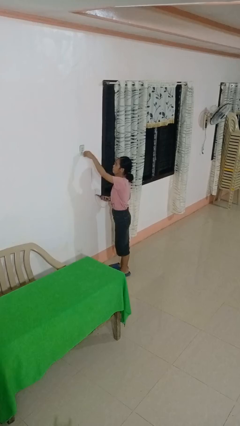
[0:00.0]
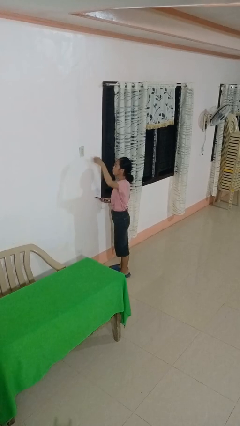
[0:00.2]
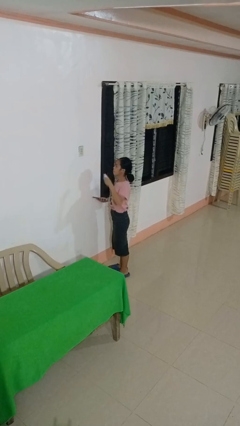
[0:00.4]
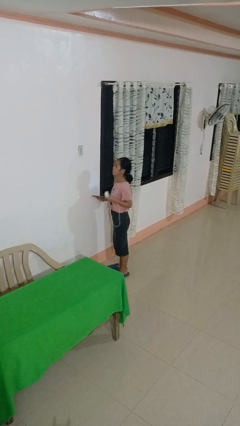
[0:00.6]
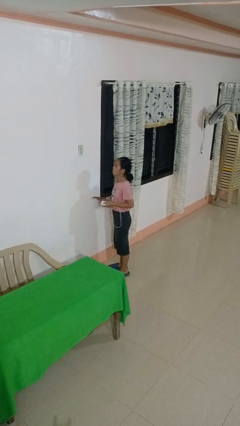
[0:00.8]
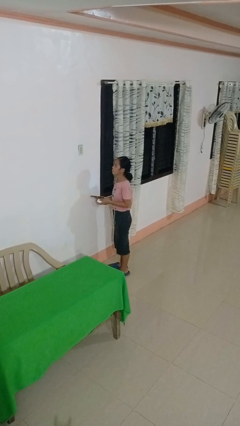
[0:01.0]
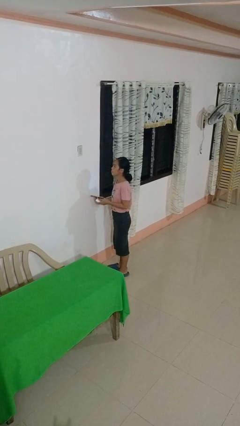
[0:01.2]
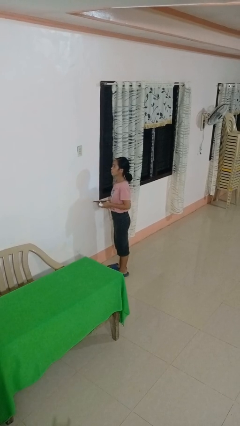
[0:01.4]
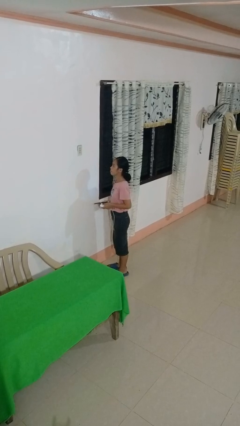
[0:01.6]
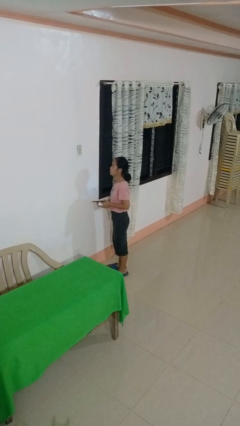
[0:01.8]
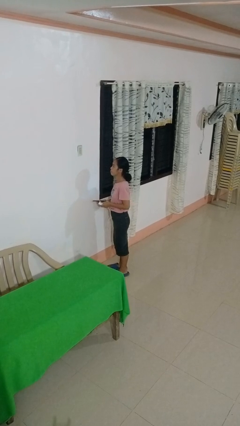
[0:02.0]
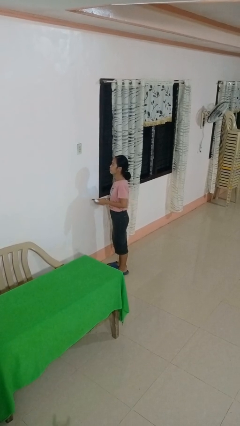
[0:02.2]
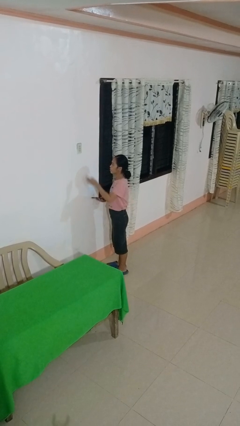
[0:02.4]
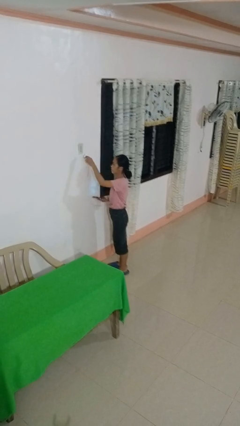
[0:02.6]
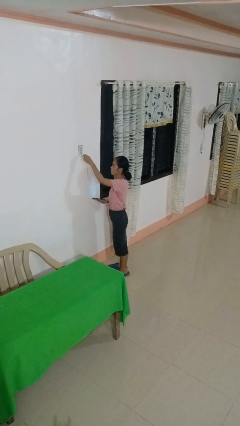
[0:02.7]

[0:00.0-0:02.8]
person unplugs from electrical socket

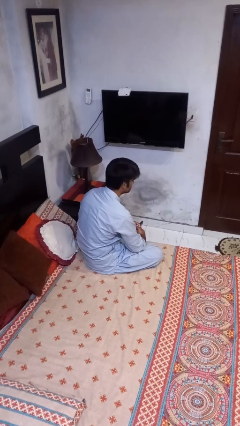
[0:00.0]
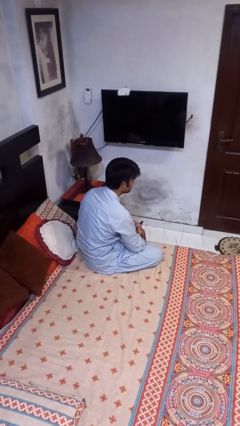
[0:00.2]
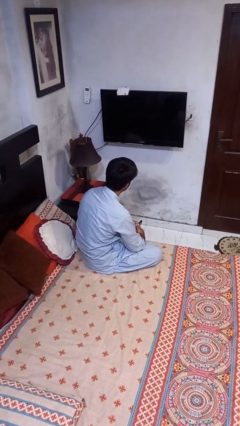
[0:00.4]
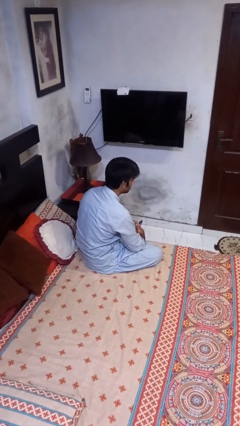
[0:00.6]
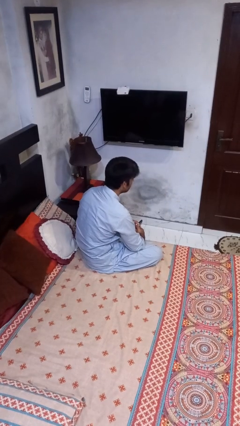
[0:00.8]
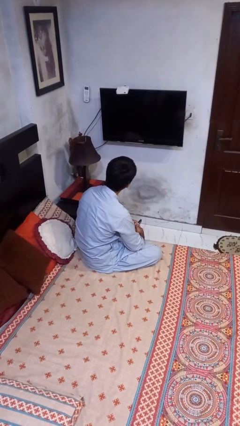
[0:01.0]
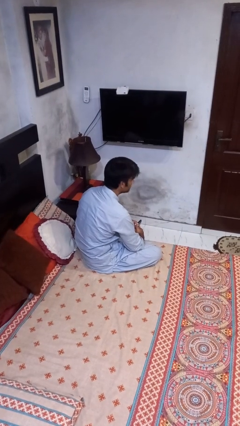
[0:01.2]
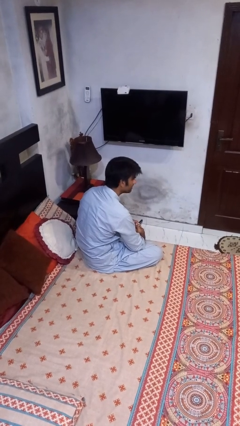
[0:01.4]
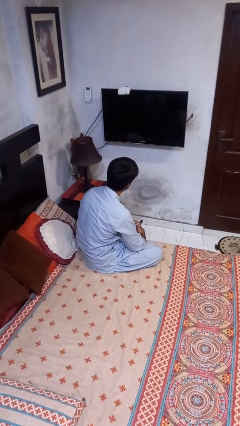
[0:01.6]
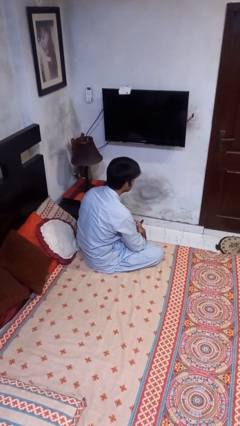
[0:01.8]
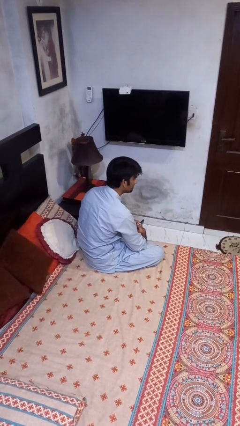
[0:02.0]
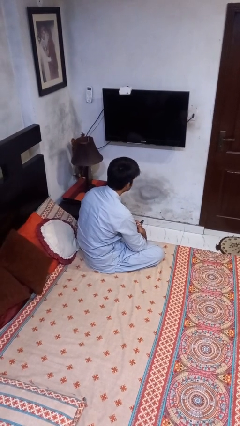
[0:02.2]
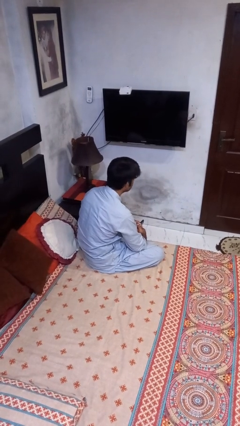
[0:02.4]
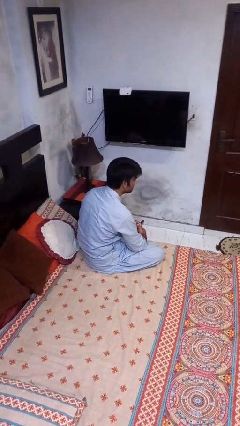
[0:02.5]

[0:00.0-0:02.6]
person shakes head

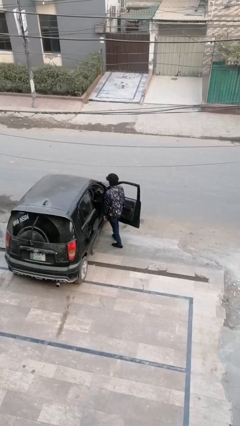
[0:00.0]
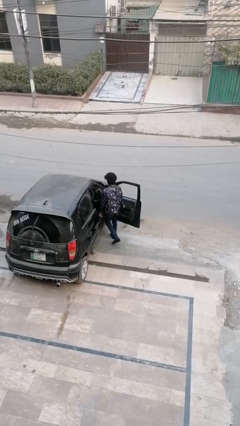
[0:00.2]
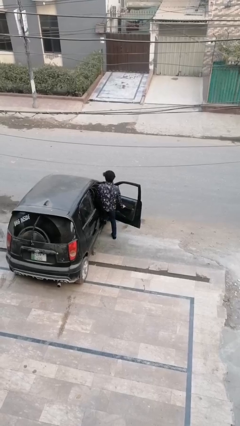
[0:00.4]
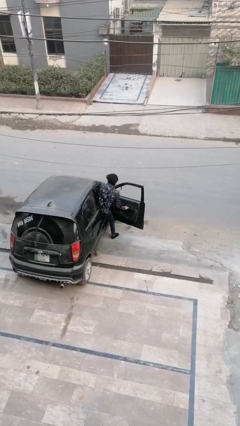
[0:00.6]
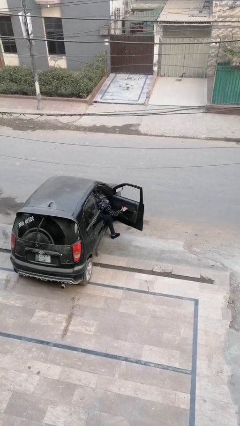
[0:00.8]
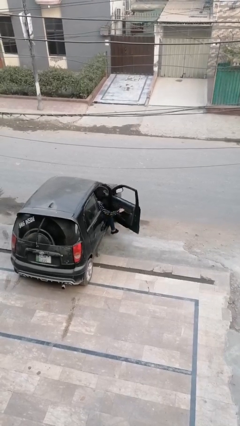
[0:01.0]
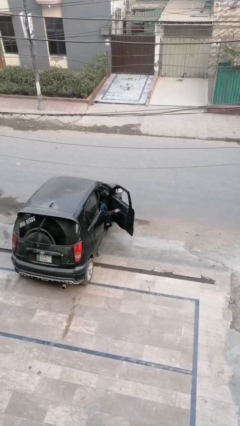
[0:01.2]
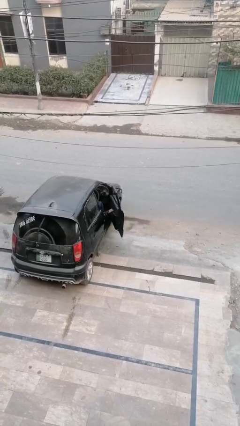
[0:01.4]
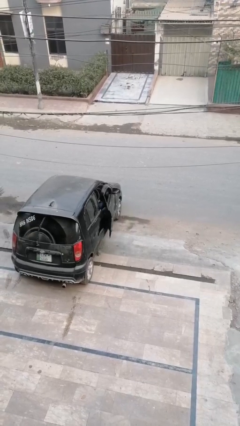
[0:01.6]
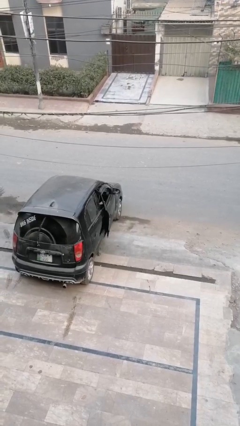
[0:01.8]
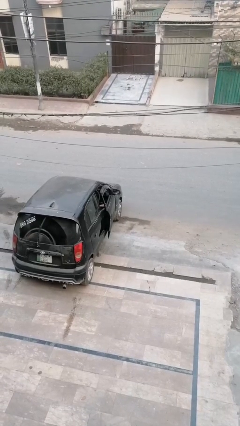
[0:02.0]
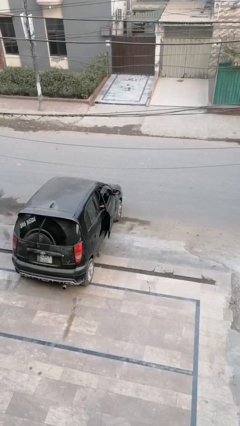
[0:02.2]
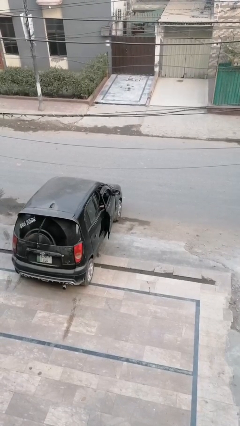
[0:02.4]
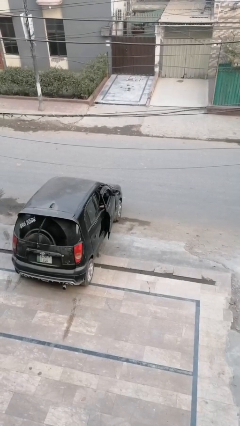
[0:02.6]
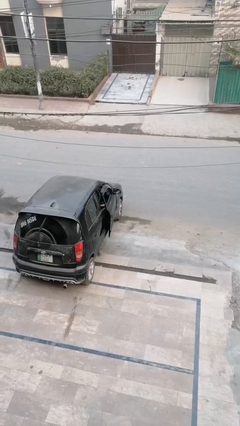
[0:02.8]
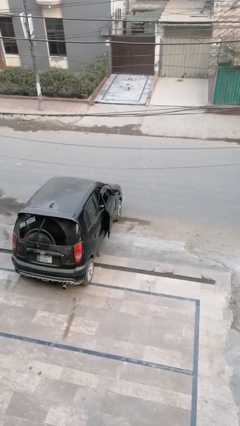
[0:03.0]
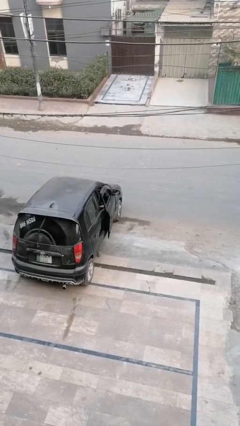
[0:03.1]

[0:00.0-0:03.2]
person enters car

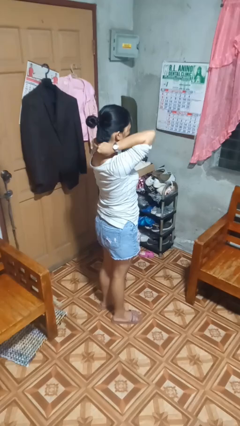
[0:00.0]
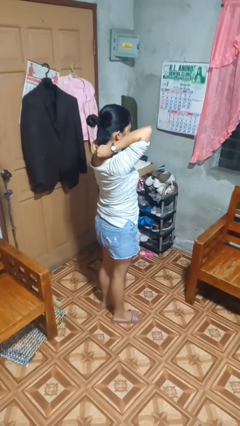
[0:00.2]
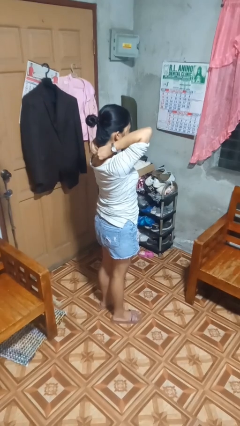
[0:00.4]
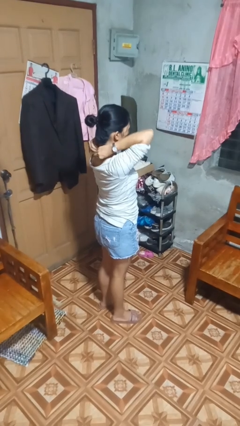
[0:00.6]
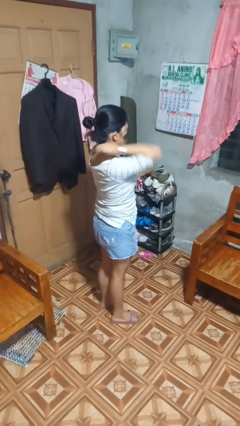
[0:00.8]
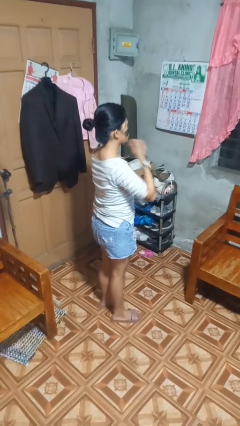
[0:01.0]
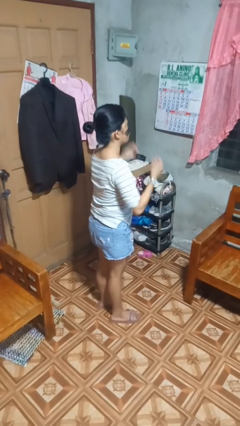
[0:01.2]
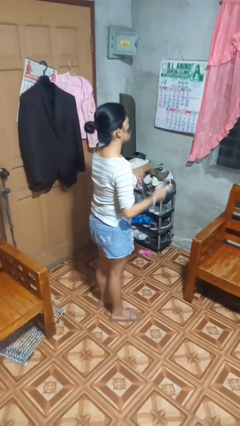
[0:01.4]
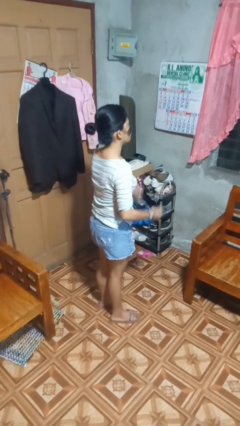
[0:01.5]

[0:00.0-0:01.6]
person takes off necklace

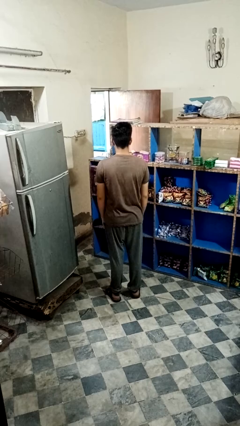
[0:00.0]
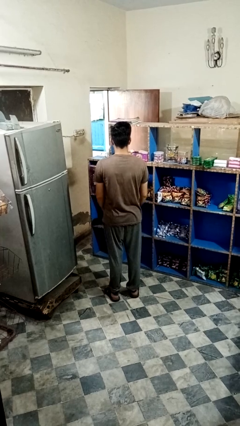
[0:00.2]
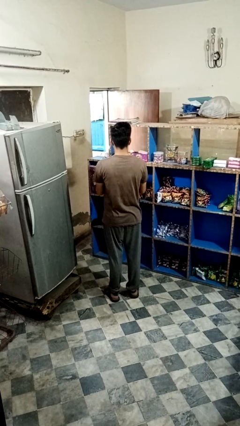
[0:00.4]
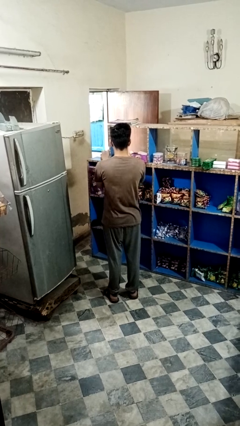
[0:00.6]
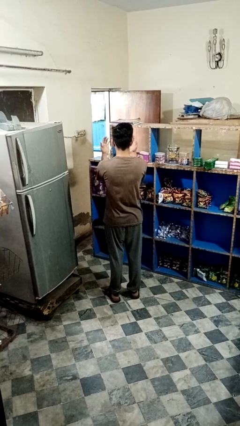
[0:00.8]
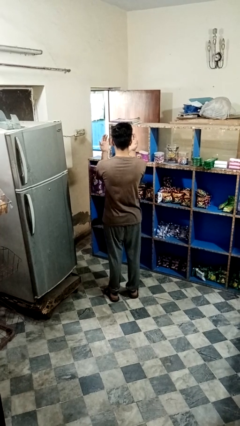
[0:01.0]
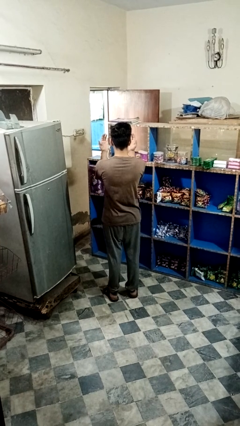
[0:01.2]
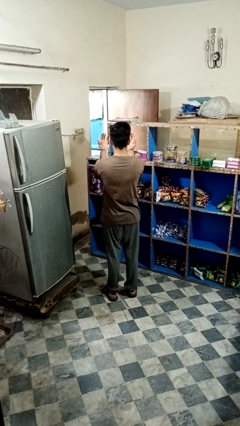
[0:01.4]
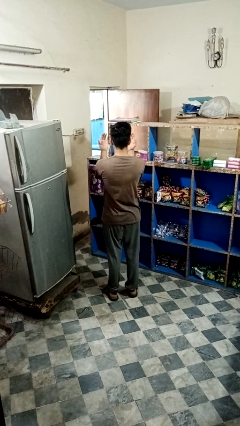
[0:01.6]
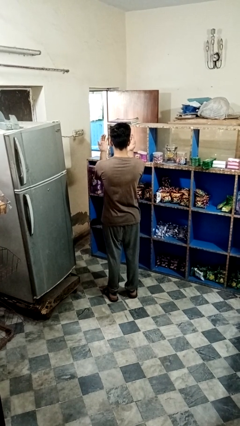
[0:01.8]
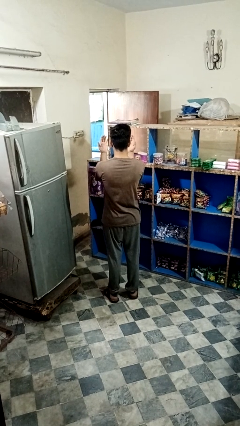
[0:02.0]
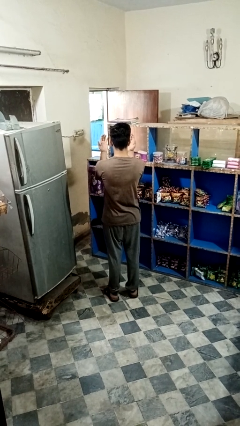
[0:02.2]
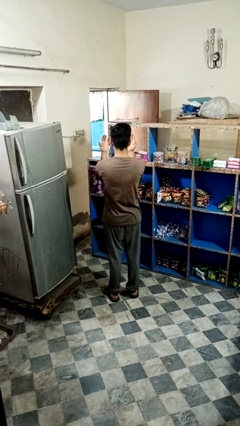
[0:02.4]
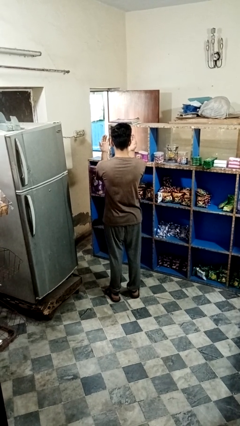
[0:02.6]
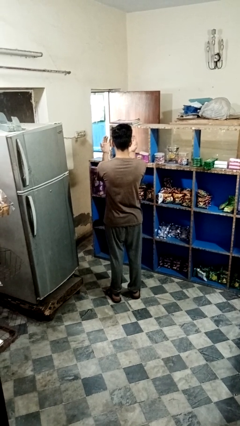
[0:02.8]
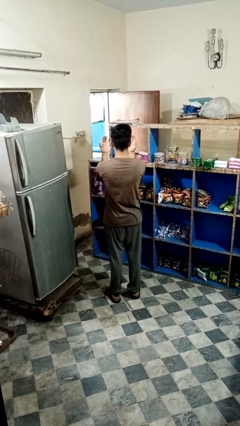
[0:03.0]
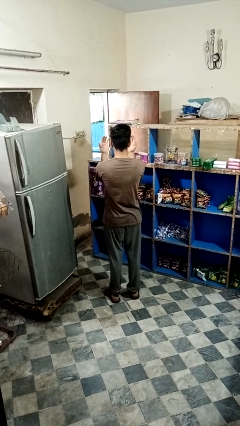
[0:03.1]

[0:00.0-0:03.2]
person prays

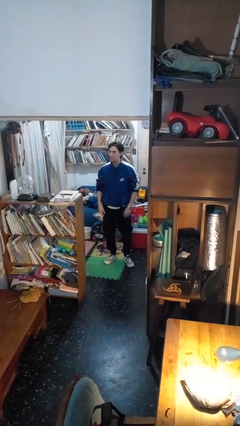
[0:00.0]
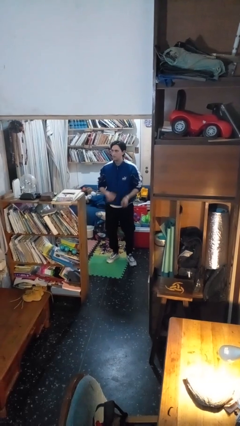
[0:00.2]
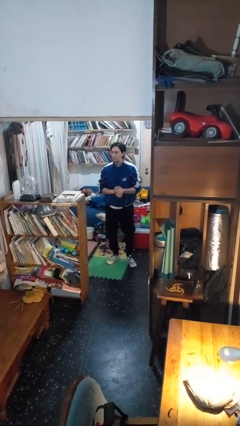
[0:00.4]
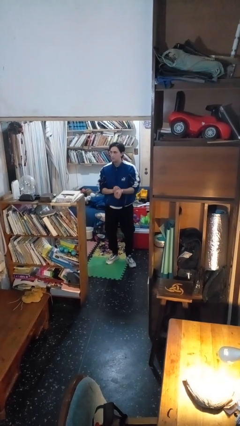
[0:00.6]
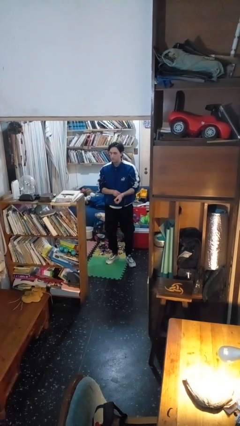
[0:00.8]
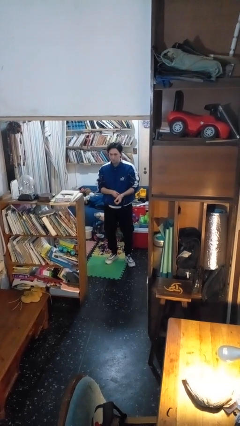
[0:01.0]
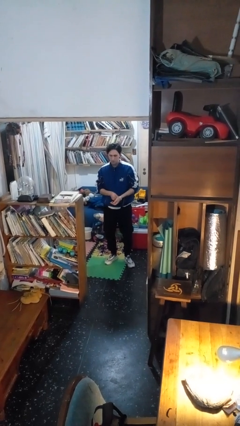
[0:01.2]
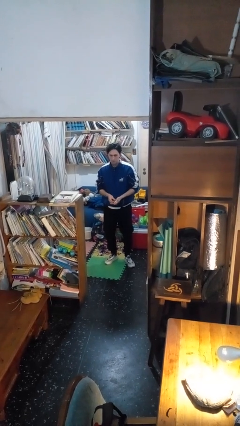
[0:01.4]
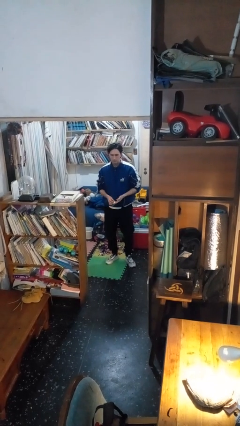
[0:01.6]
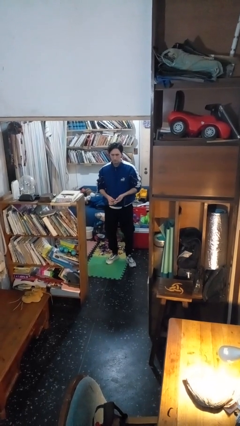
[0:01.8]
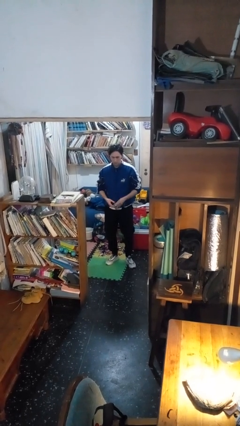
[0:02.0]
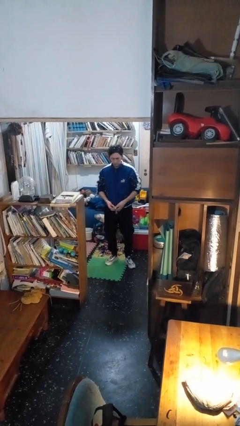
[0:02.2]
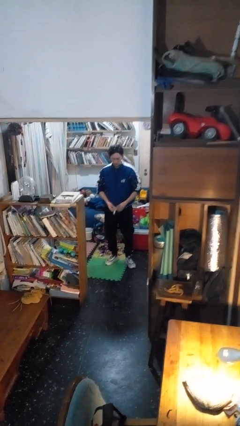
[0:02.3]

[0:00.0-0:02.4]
person takes off wristwatch

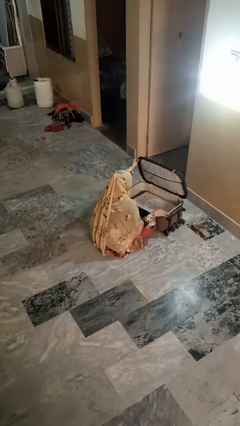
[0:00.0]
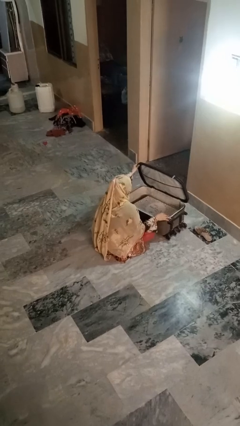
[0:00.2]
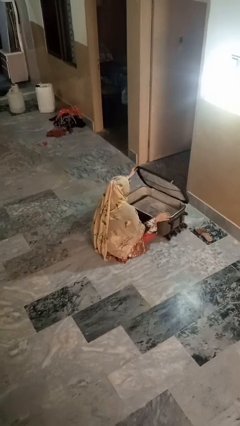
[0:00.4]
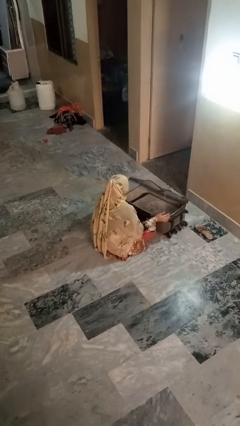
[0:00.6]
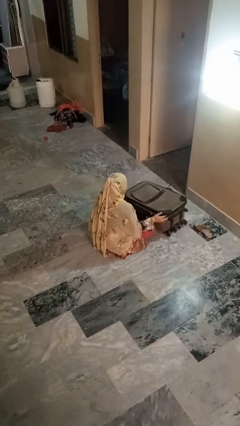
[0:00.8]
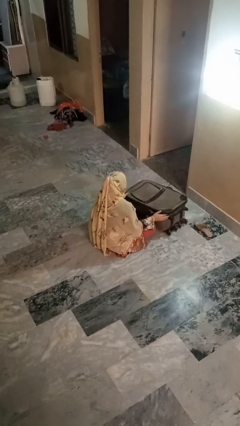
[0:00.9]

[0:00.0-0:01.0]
person closes suitcase

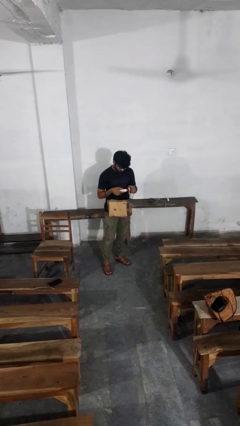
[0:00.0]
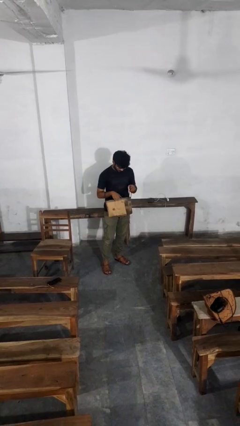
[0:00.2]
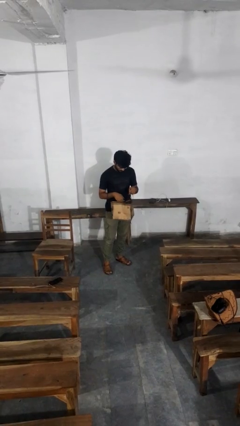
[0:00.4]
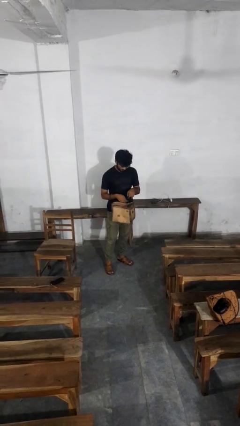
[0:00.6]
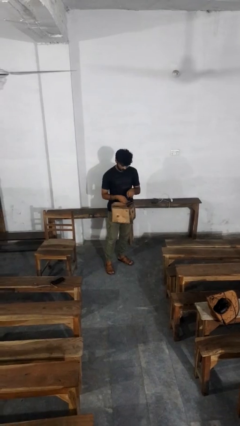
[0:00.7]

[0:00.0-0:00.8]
person puts object into purse
